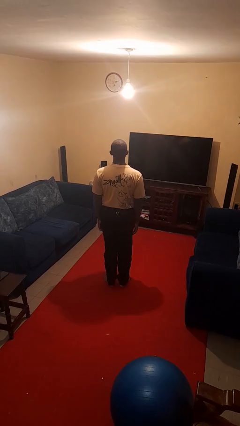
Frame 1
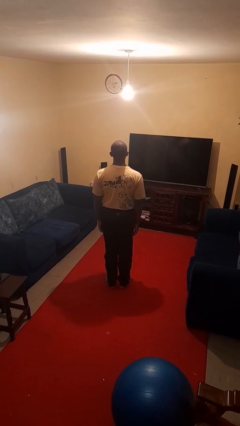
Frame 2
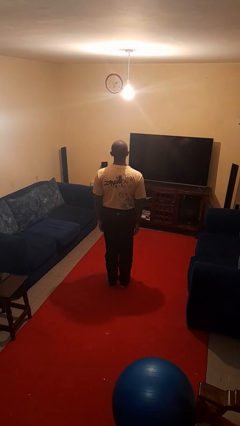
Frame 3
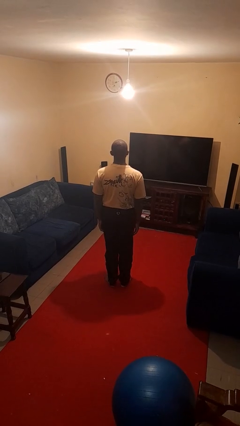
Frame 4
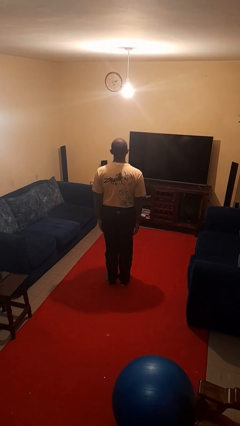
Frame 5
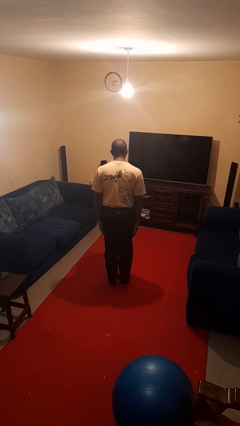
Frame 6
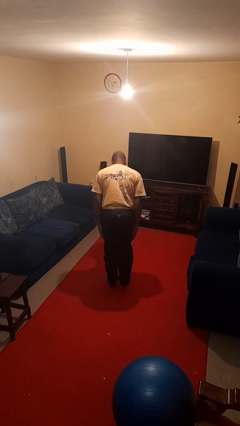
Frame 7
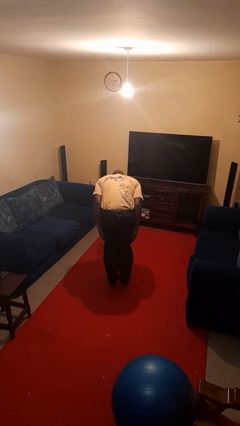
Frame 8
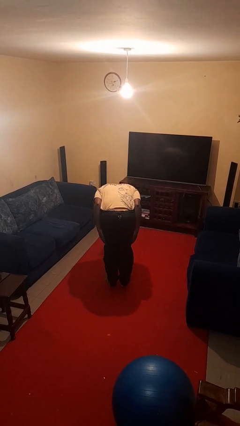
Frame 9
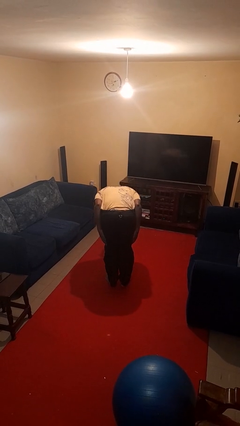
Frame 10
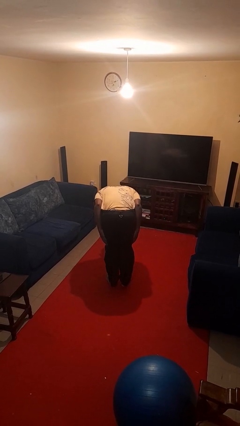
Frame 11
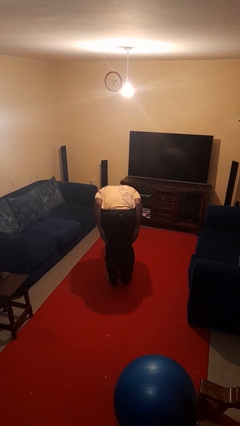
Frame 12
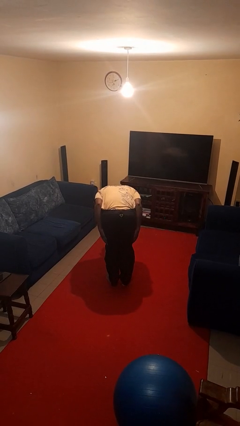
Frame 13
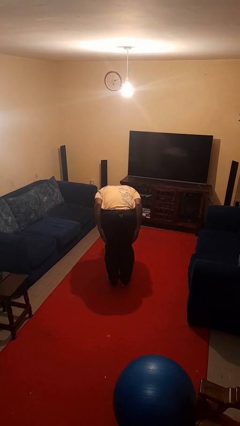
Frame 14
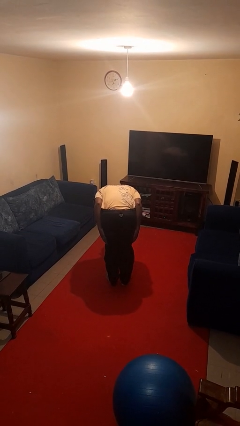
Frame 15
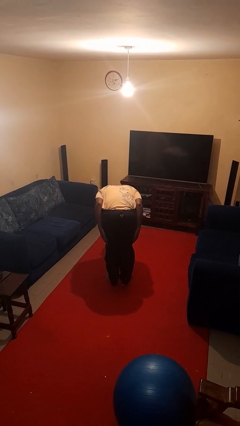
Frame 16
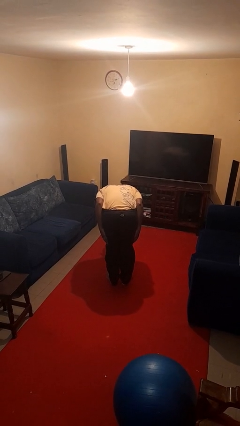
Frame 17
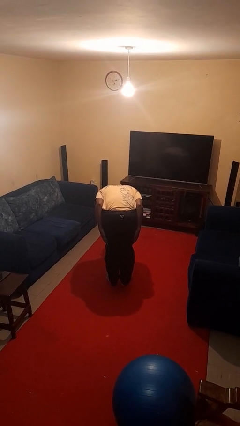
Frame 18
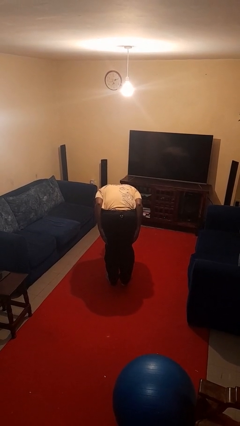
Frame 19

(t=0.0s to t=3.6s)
person bows

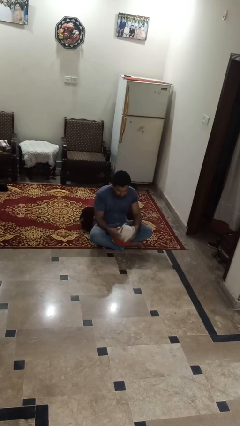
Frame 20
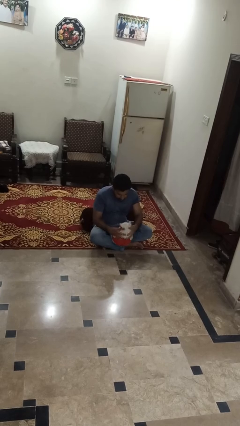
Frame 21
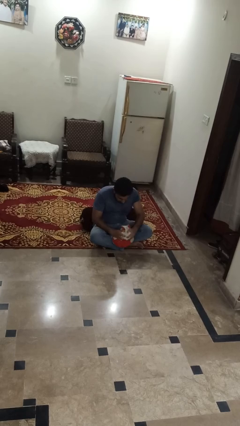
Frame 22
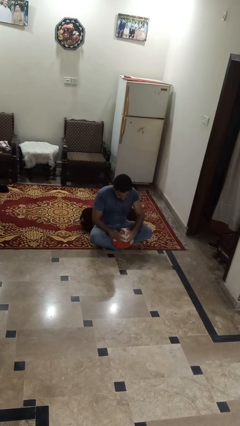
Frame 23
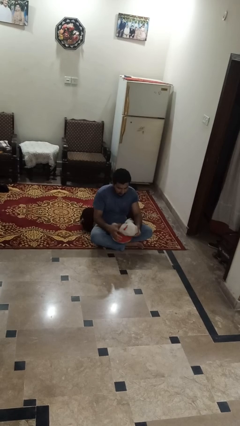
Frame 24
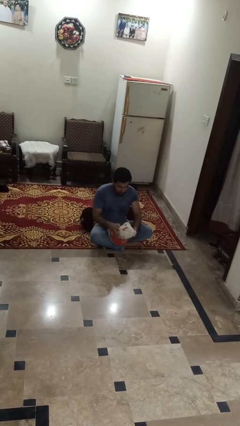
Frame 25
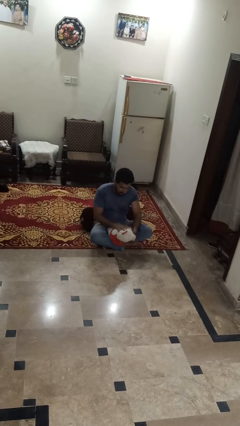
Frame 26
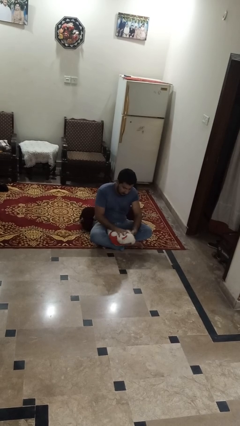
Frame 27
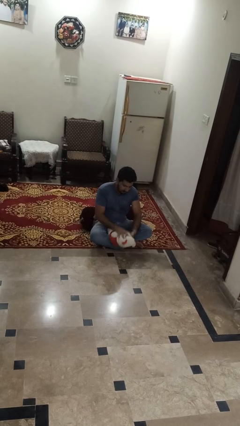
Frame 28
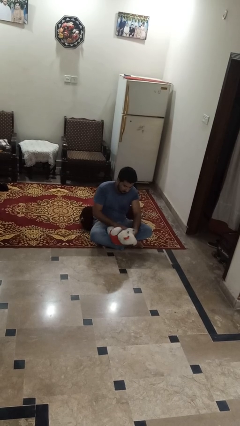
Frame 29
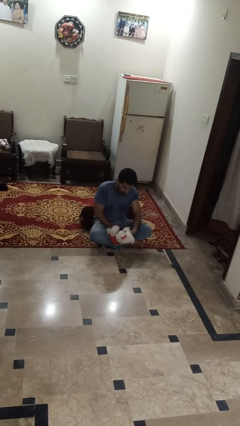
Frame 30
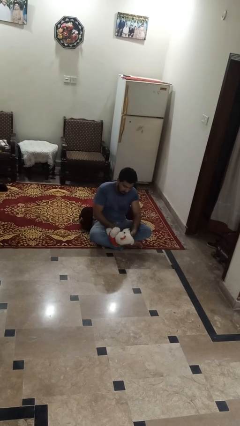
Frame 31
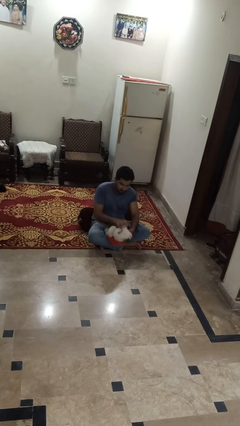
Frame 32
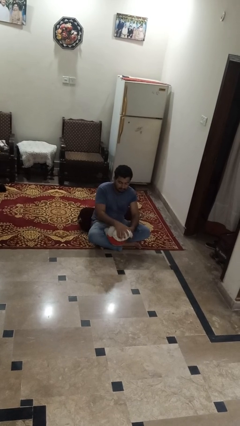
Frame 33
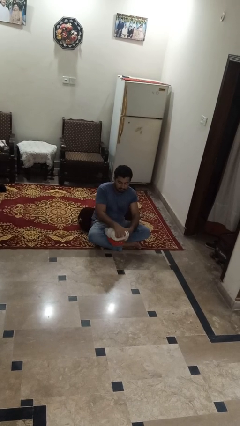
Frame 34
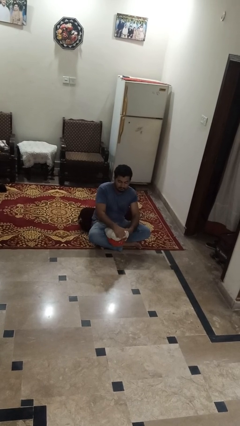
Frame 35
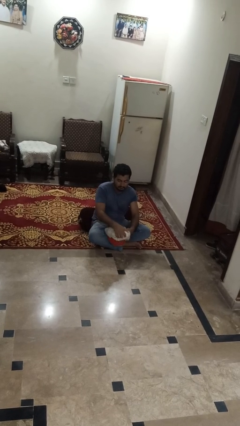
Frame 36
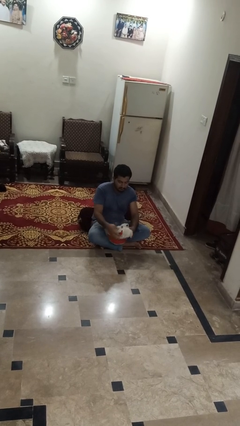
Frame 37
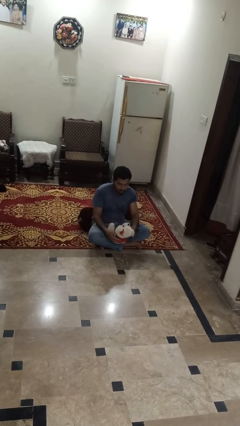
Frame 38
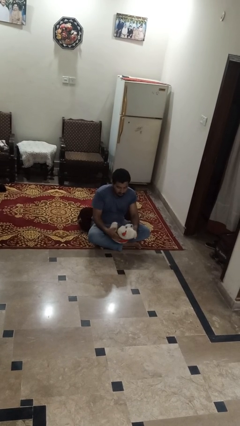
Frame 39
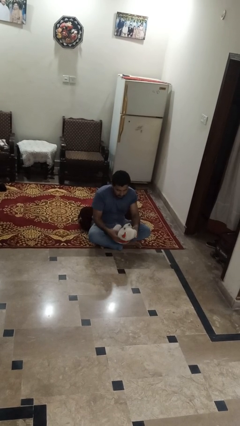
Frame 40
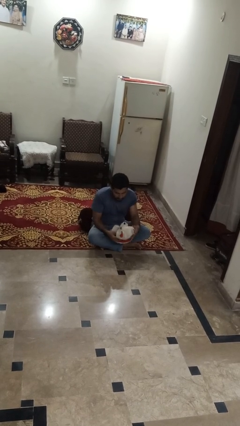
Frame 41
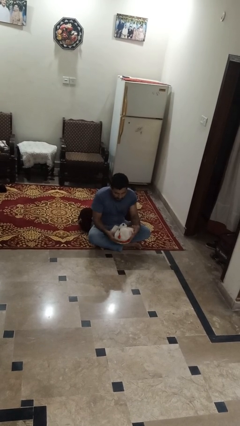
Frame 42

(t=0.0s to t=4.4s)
person squeezes object

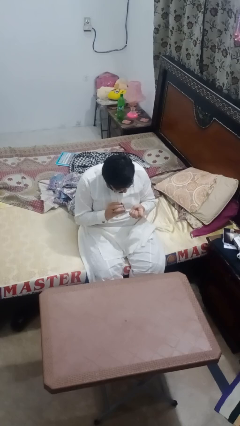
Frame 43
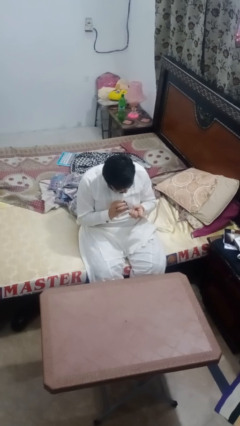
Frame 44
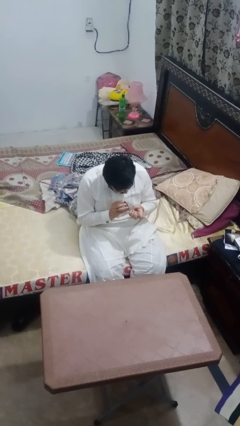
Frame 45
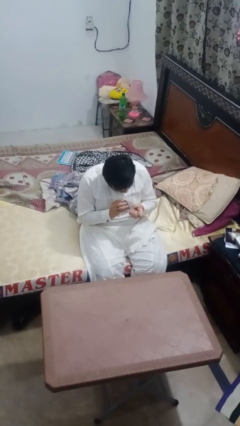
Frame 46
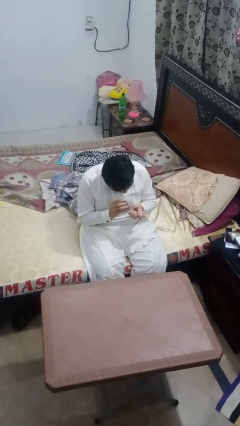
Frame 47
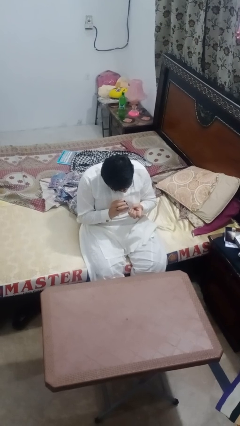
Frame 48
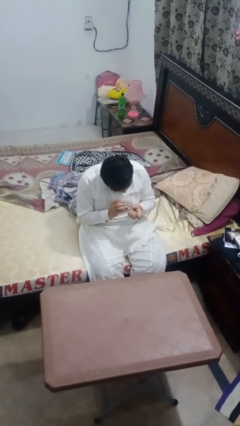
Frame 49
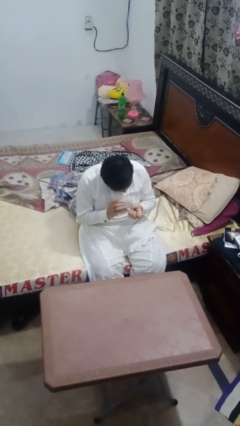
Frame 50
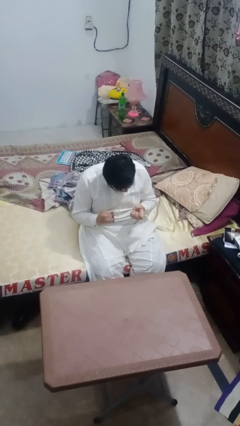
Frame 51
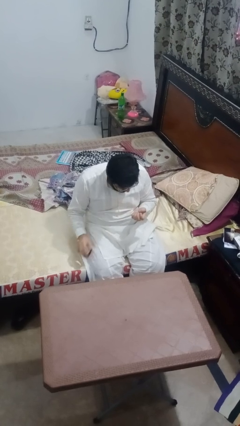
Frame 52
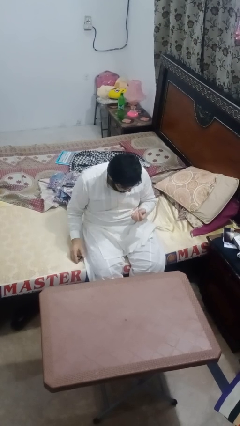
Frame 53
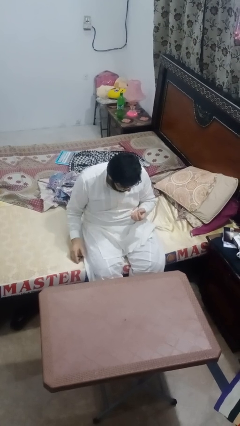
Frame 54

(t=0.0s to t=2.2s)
person clips fingernails

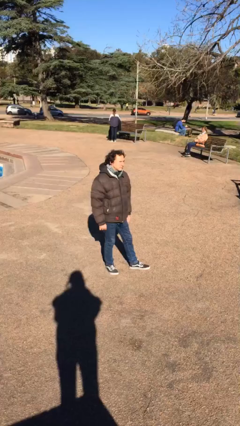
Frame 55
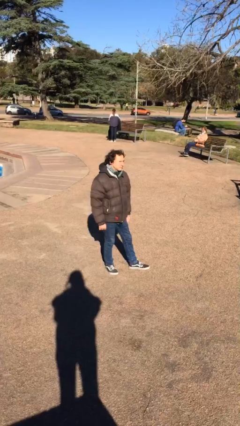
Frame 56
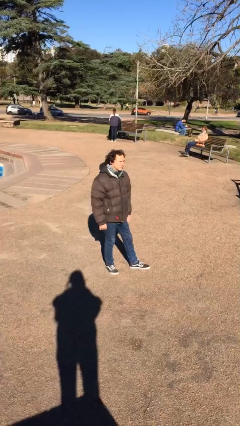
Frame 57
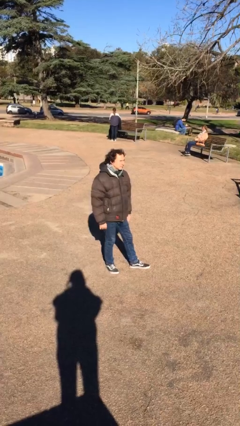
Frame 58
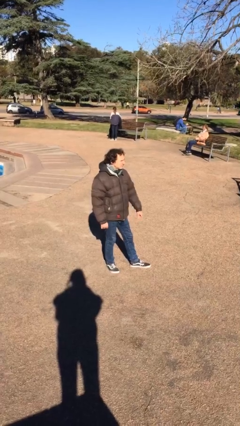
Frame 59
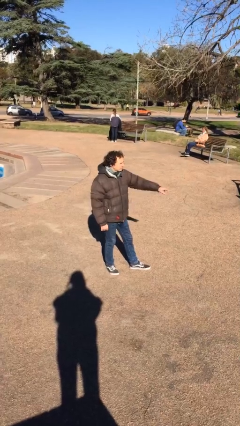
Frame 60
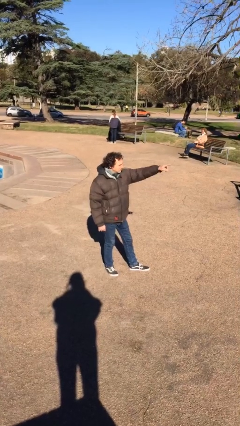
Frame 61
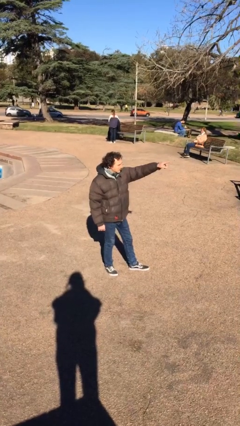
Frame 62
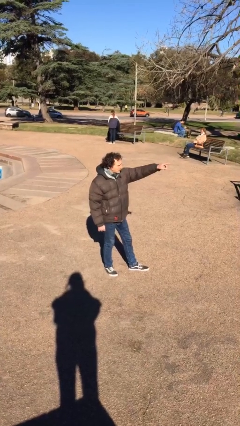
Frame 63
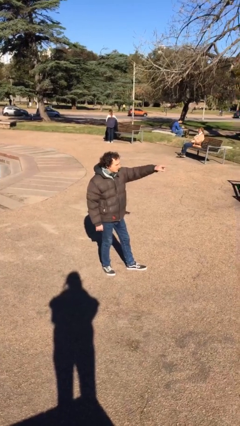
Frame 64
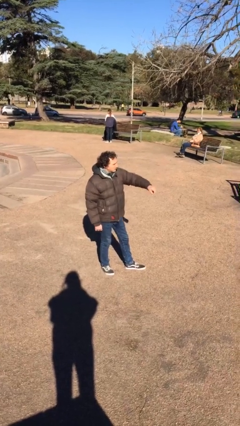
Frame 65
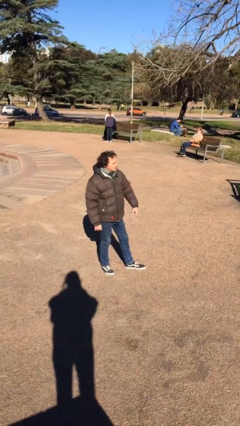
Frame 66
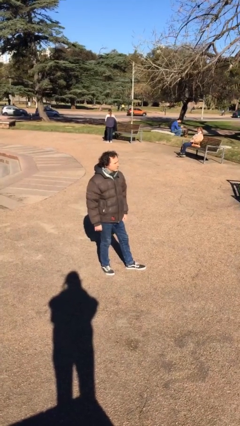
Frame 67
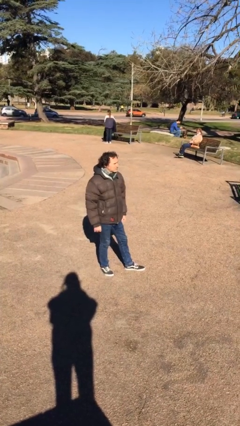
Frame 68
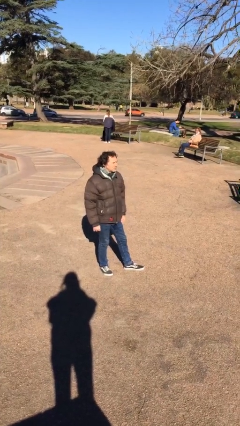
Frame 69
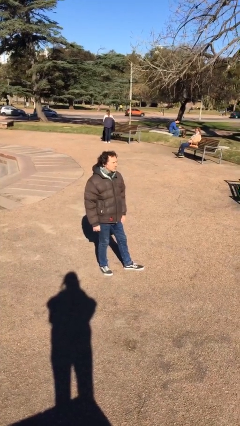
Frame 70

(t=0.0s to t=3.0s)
person points at person

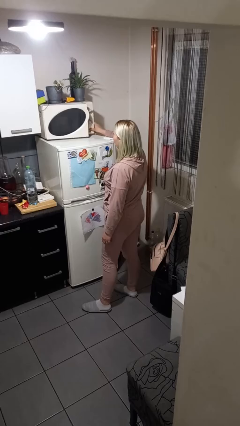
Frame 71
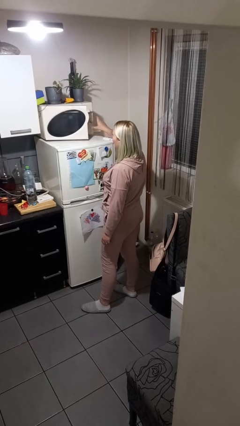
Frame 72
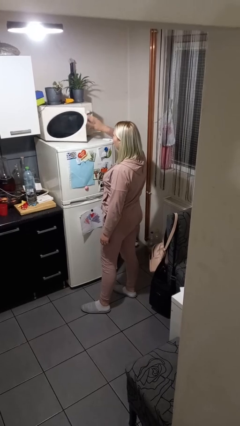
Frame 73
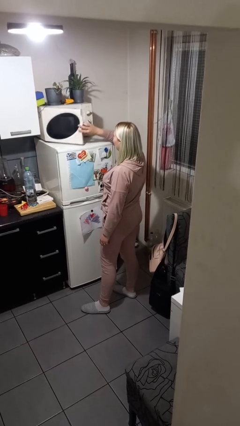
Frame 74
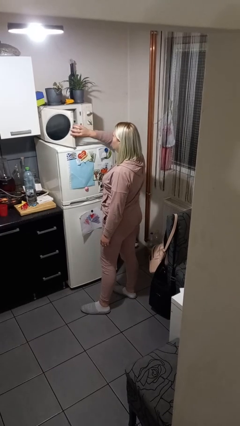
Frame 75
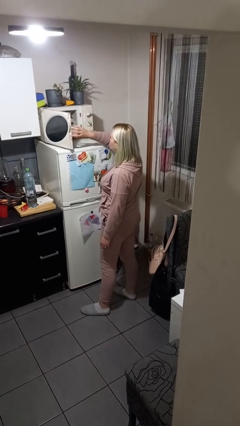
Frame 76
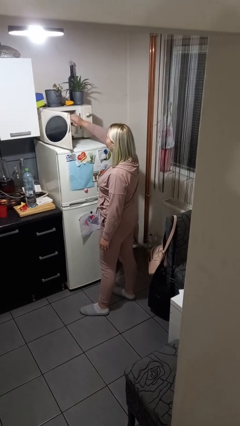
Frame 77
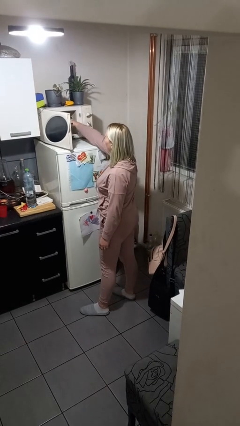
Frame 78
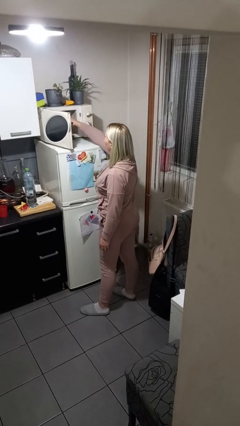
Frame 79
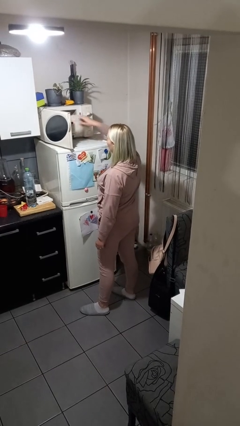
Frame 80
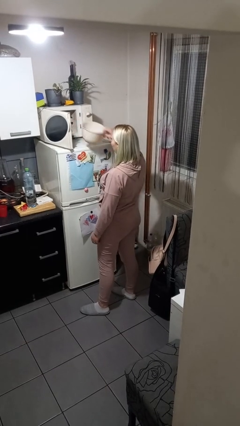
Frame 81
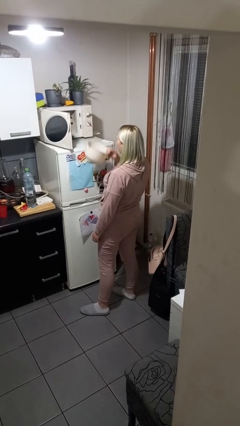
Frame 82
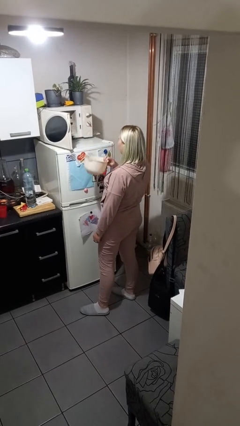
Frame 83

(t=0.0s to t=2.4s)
person takes object from microwave

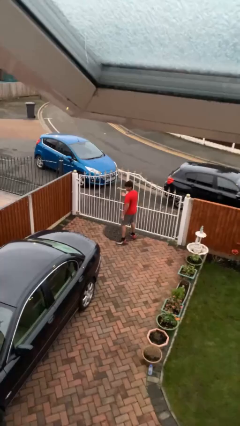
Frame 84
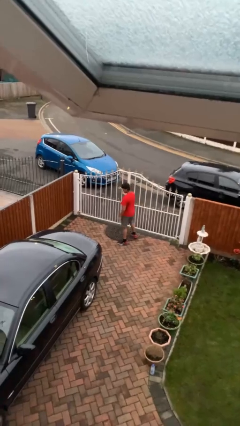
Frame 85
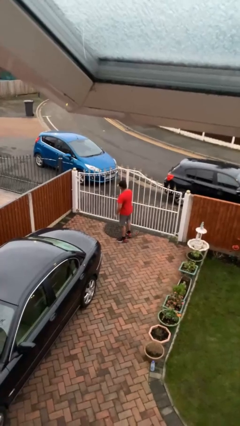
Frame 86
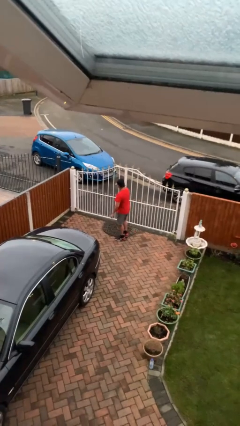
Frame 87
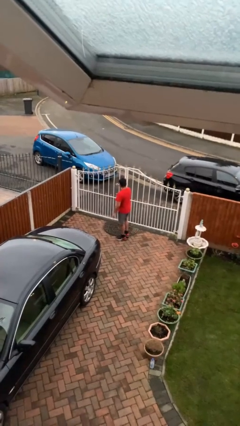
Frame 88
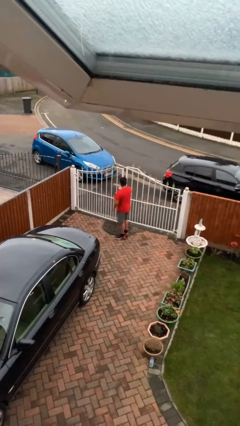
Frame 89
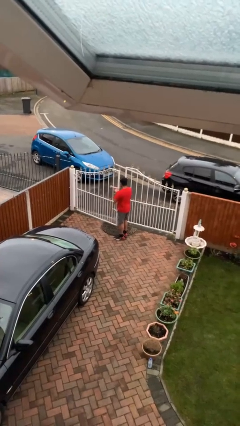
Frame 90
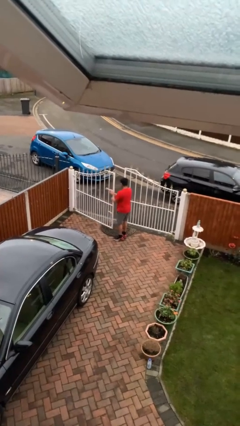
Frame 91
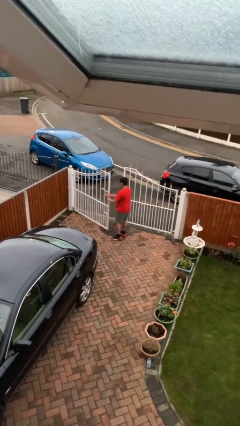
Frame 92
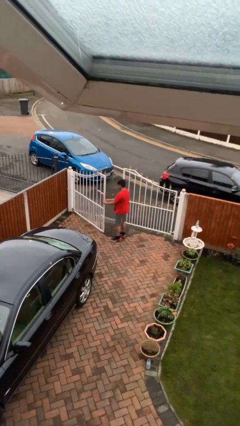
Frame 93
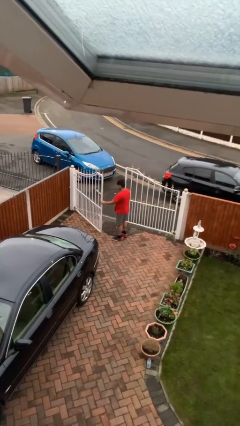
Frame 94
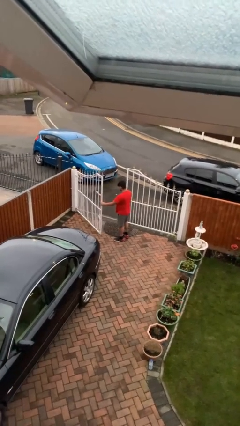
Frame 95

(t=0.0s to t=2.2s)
person opens facility door
